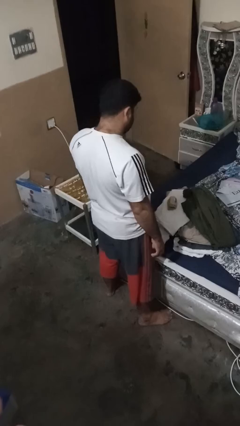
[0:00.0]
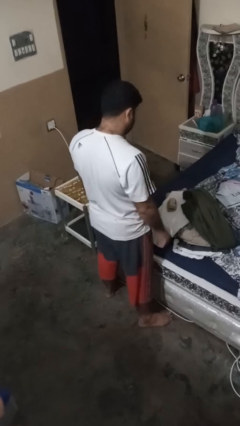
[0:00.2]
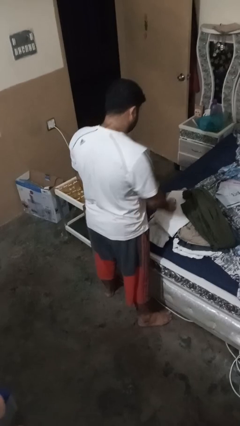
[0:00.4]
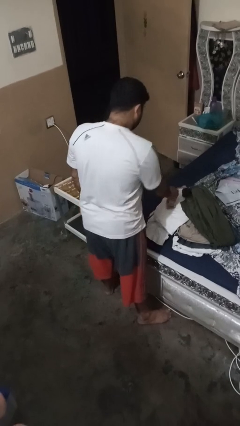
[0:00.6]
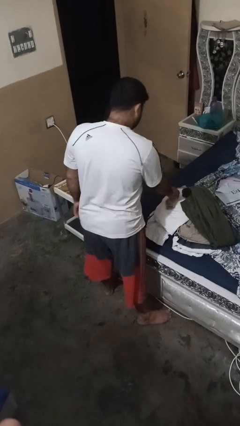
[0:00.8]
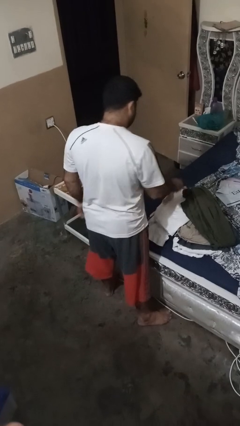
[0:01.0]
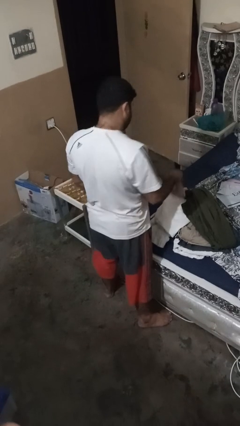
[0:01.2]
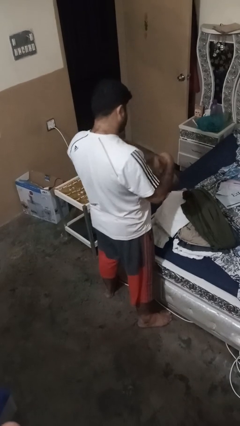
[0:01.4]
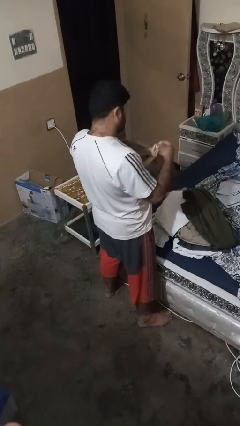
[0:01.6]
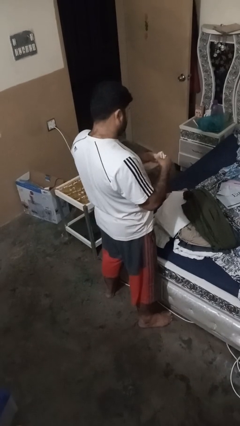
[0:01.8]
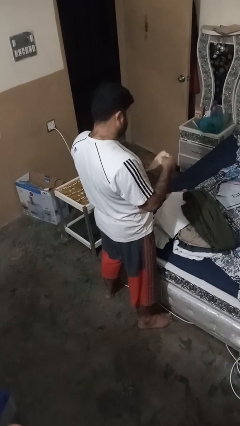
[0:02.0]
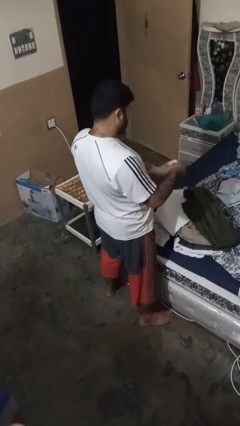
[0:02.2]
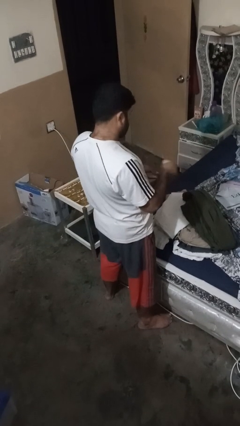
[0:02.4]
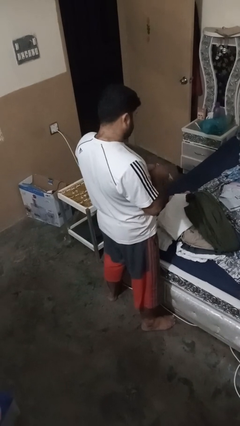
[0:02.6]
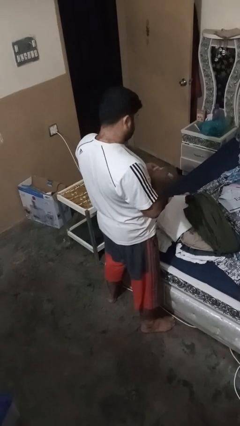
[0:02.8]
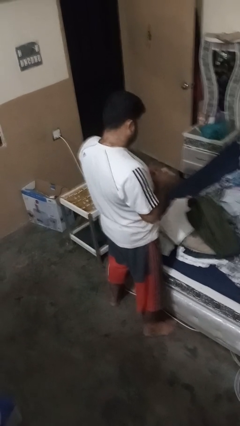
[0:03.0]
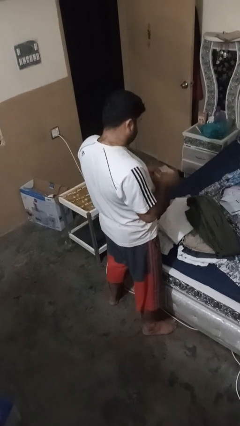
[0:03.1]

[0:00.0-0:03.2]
person folds socks

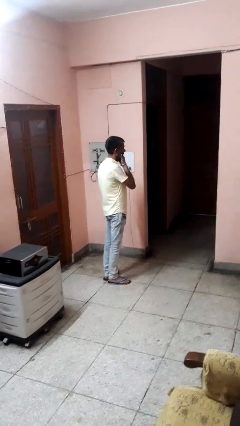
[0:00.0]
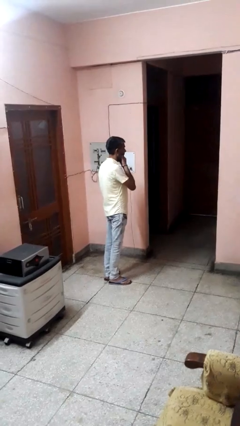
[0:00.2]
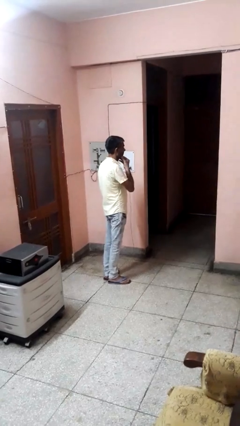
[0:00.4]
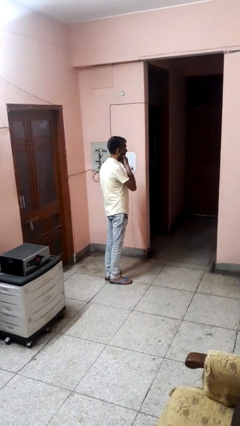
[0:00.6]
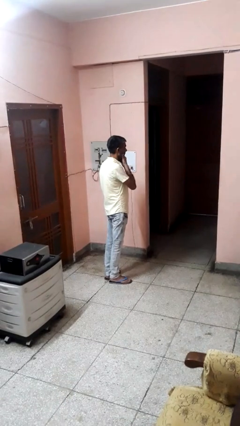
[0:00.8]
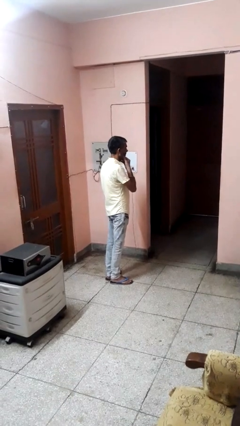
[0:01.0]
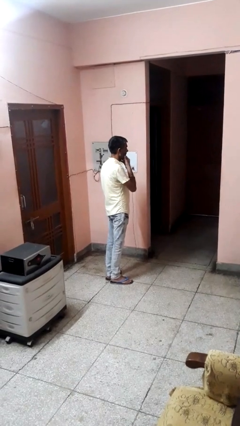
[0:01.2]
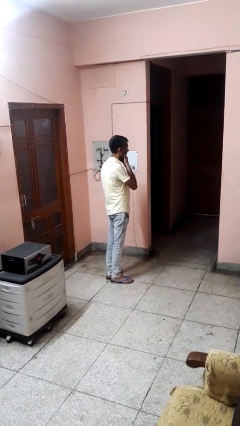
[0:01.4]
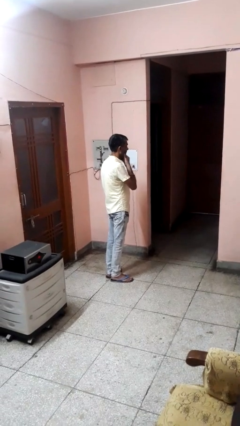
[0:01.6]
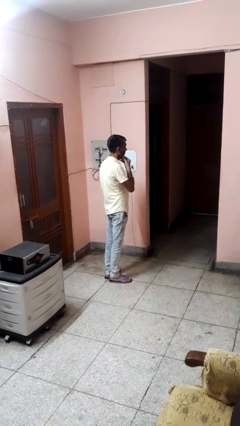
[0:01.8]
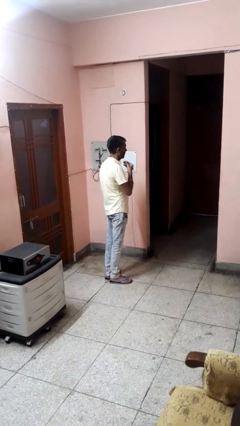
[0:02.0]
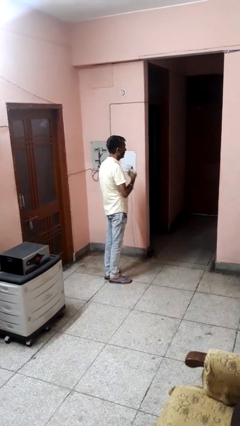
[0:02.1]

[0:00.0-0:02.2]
person strokes chin

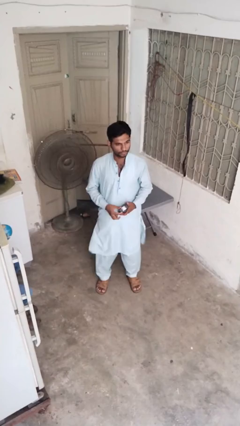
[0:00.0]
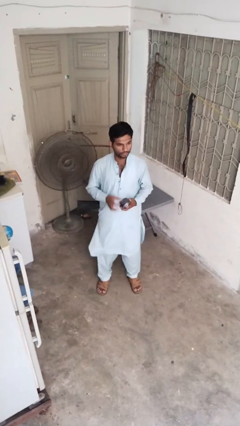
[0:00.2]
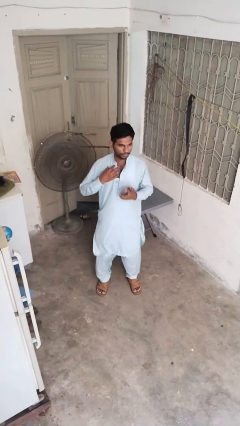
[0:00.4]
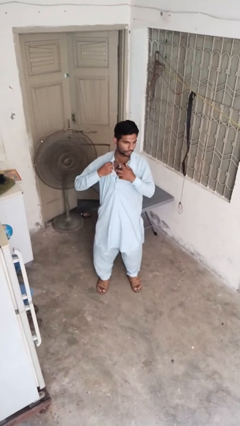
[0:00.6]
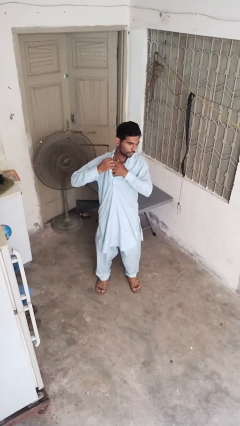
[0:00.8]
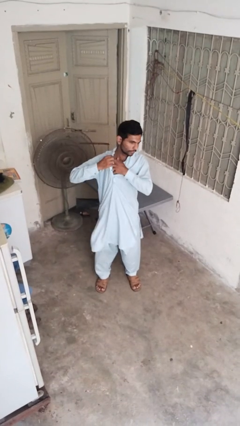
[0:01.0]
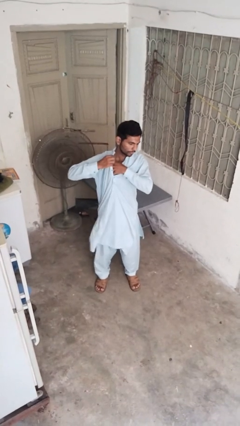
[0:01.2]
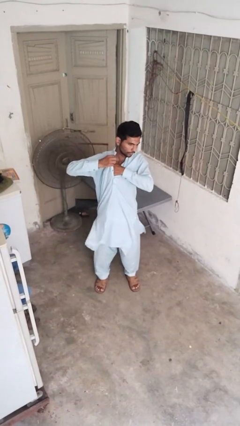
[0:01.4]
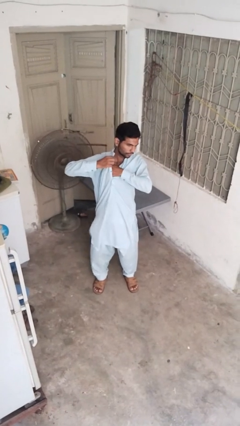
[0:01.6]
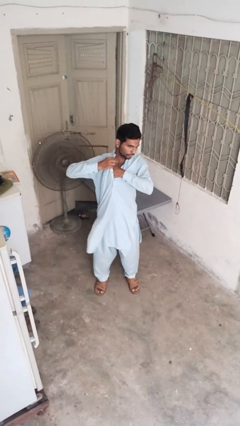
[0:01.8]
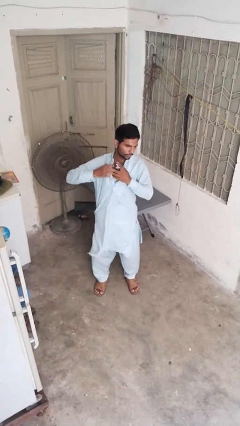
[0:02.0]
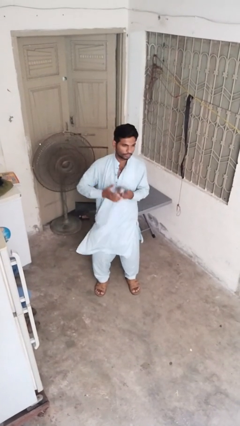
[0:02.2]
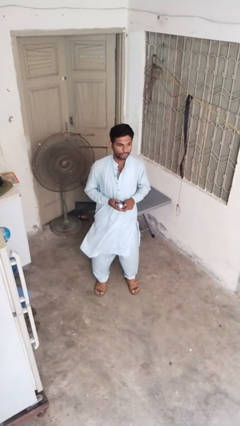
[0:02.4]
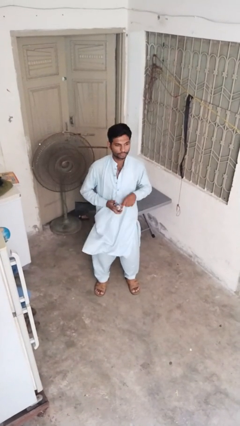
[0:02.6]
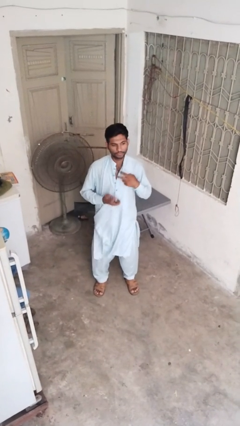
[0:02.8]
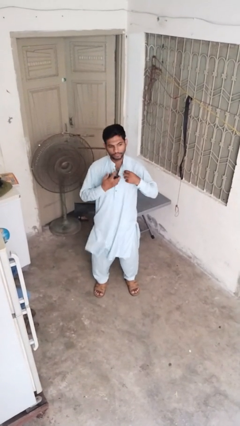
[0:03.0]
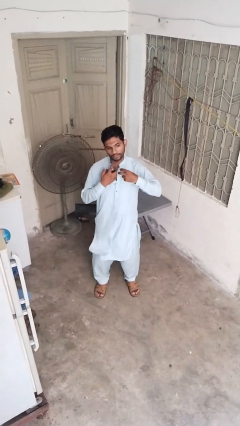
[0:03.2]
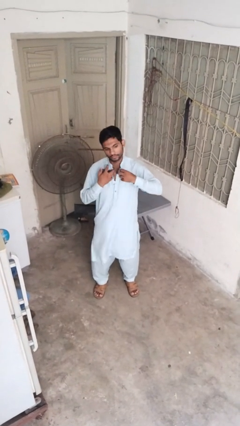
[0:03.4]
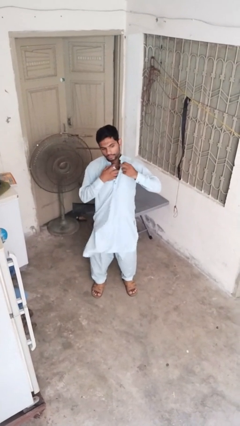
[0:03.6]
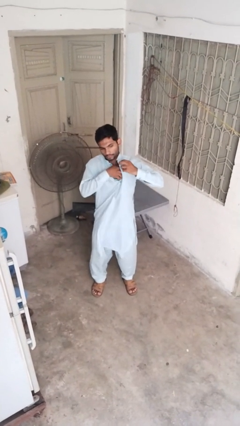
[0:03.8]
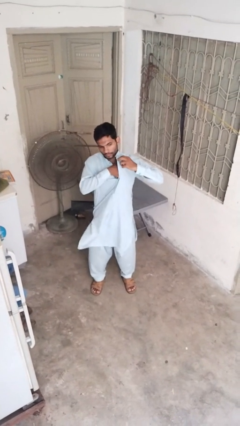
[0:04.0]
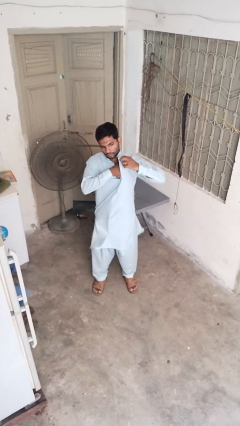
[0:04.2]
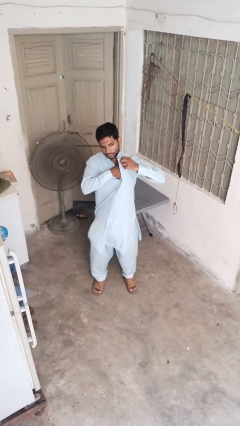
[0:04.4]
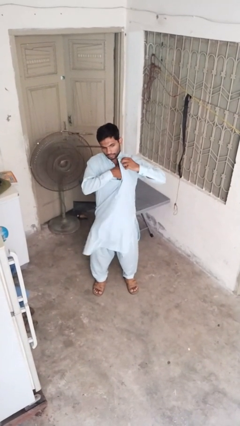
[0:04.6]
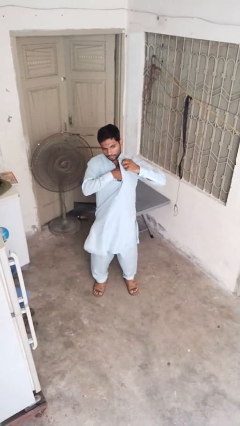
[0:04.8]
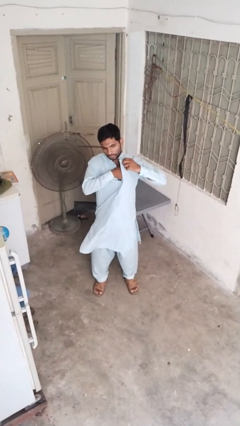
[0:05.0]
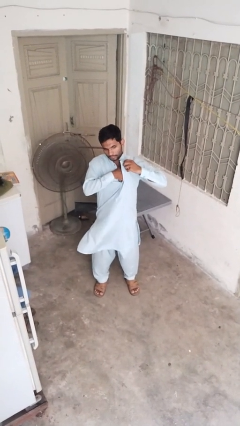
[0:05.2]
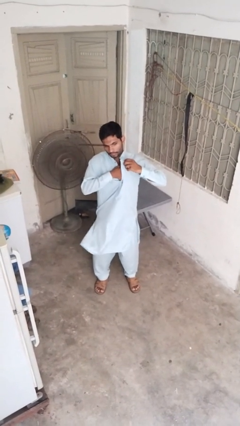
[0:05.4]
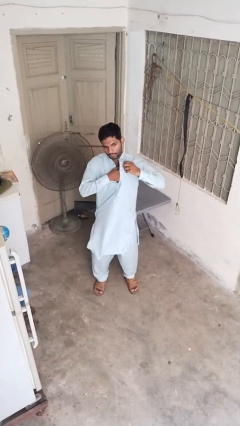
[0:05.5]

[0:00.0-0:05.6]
person applies deodorant

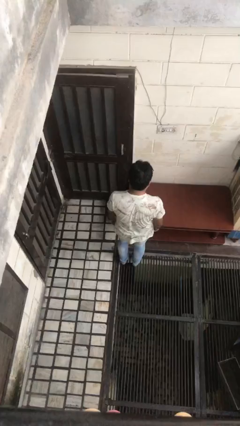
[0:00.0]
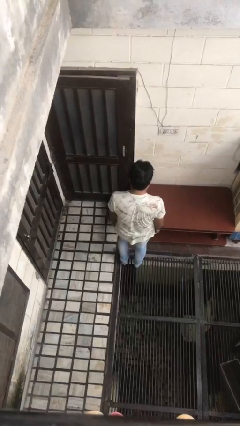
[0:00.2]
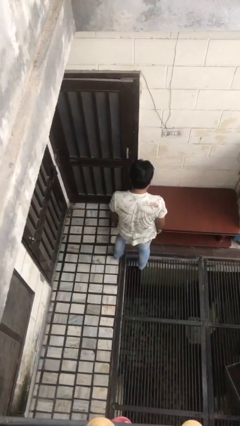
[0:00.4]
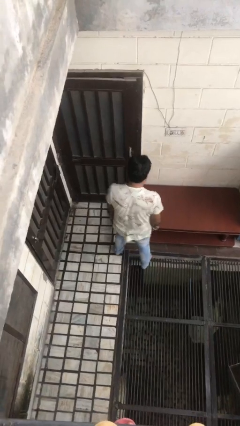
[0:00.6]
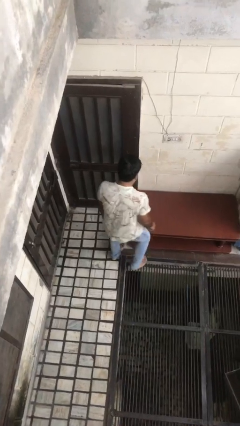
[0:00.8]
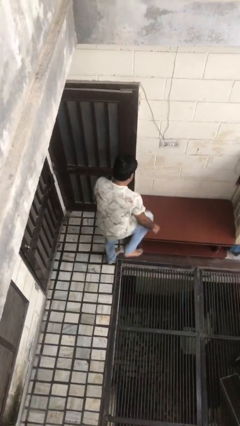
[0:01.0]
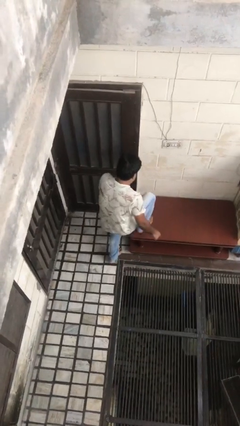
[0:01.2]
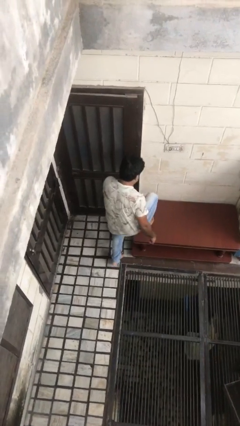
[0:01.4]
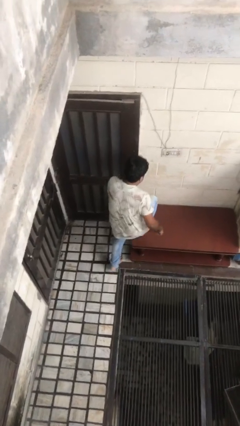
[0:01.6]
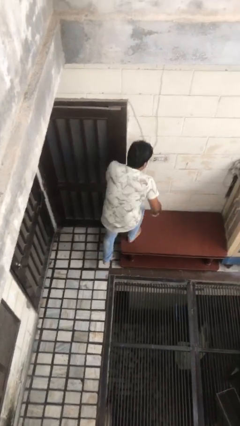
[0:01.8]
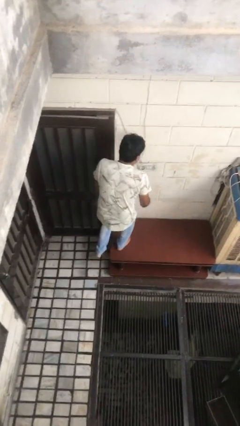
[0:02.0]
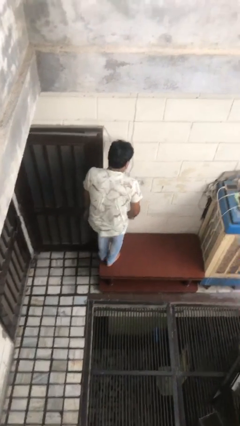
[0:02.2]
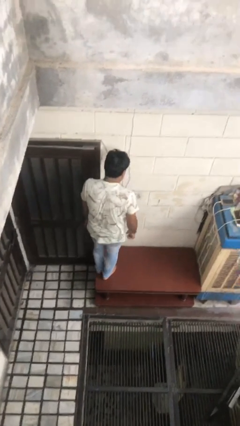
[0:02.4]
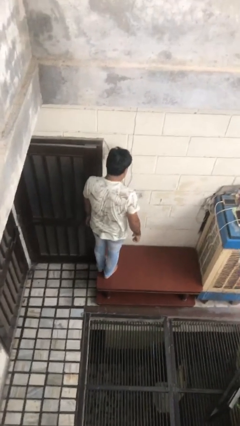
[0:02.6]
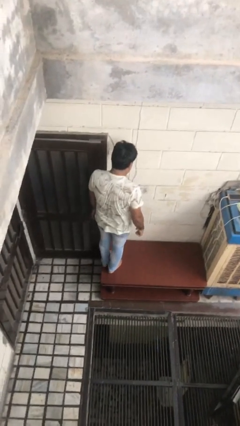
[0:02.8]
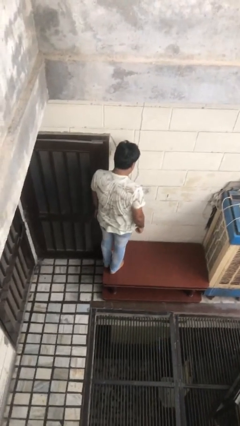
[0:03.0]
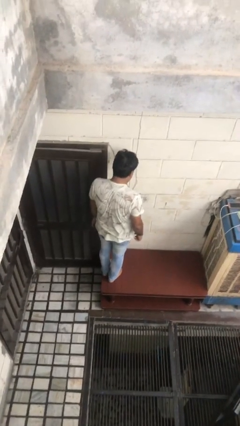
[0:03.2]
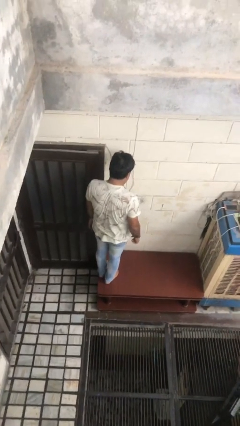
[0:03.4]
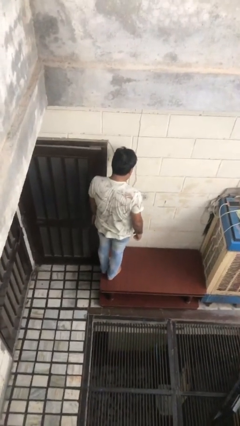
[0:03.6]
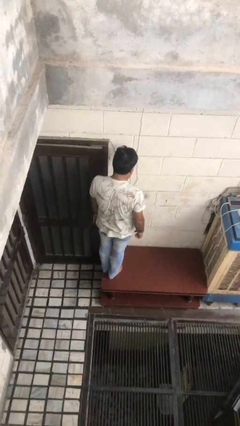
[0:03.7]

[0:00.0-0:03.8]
person climbs on table

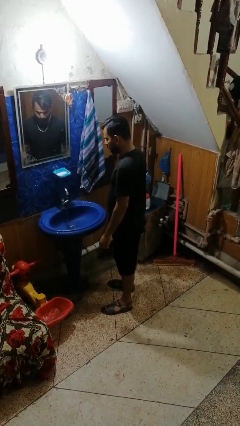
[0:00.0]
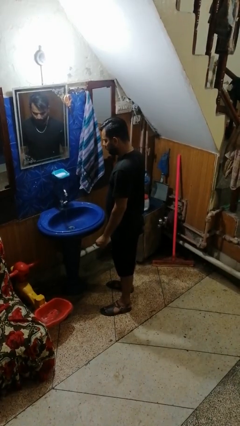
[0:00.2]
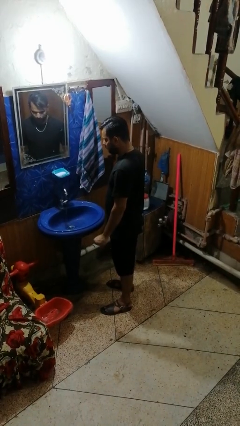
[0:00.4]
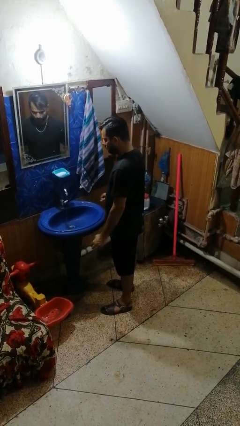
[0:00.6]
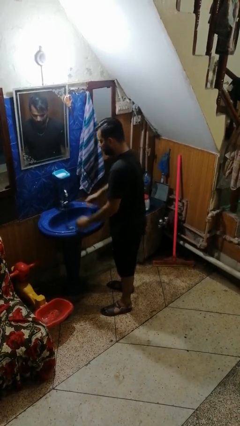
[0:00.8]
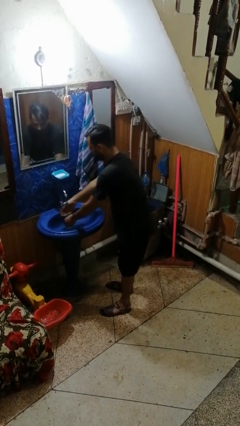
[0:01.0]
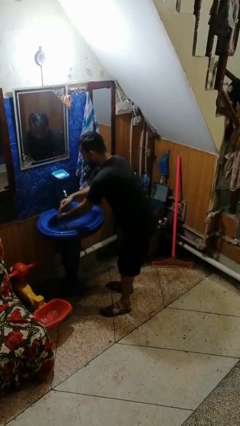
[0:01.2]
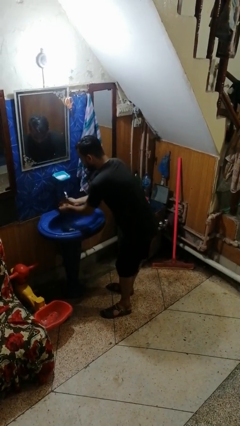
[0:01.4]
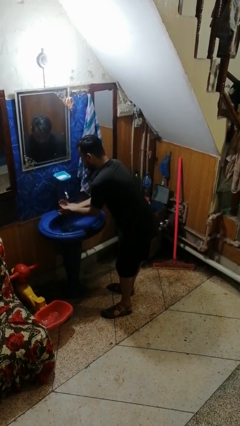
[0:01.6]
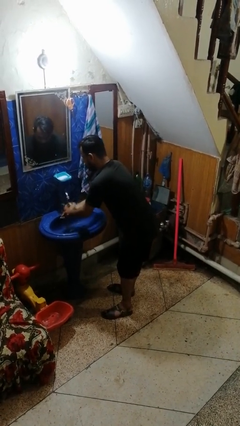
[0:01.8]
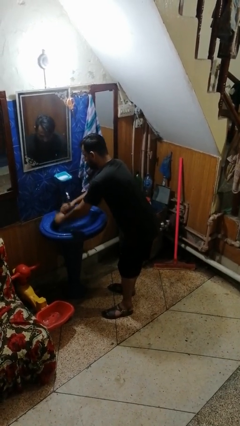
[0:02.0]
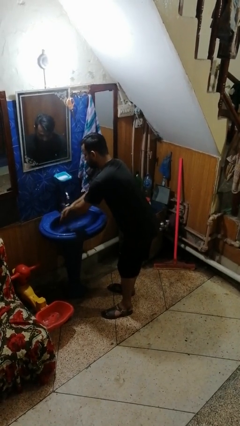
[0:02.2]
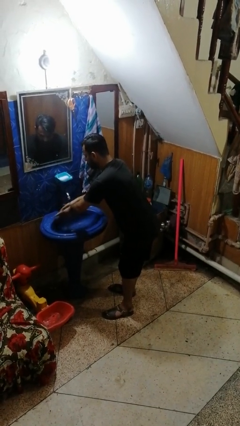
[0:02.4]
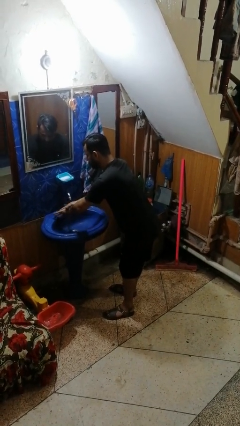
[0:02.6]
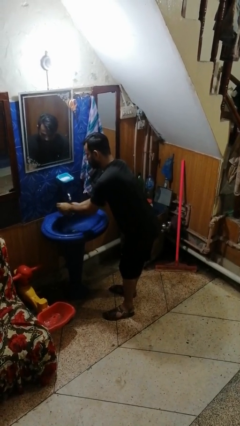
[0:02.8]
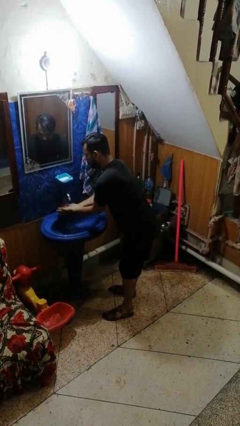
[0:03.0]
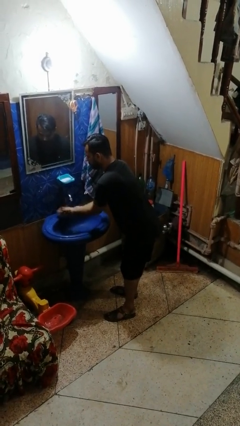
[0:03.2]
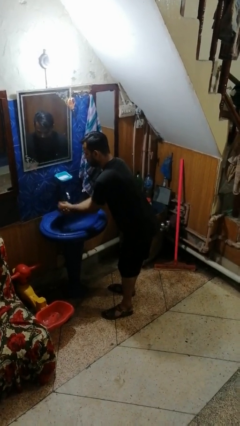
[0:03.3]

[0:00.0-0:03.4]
person washes hands
